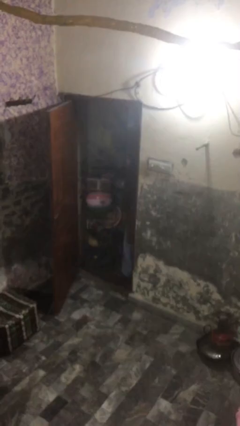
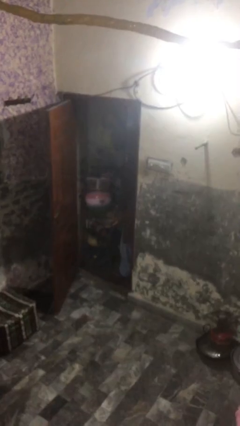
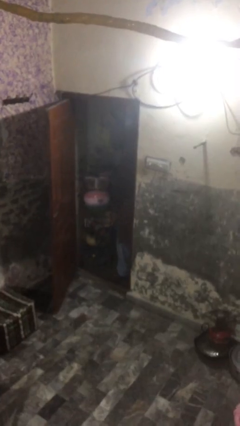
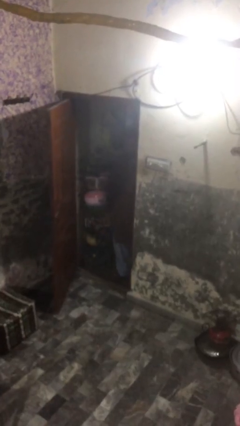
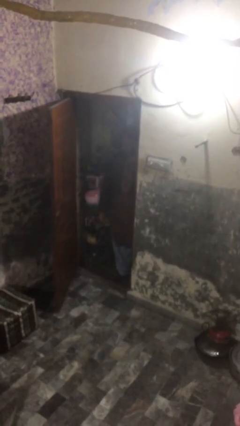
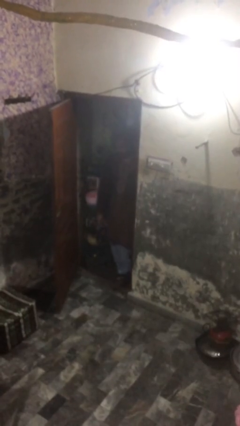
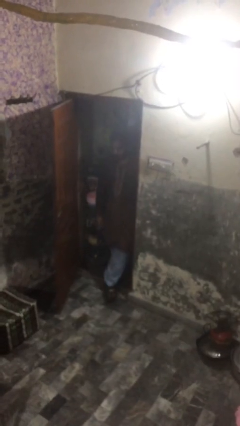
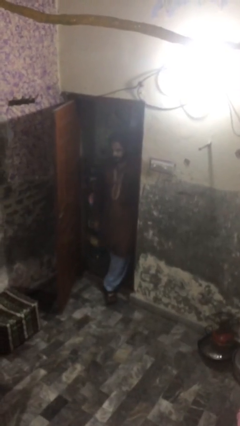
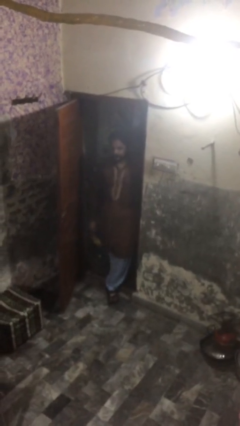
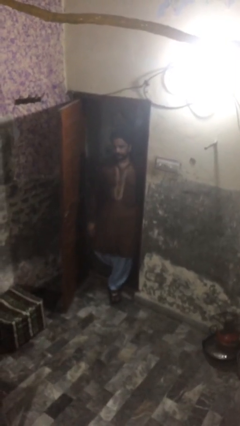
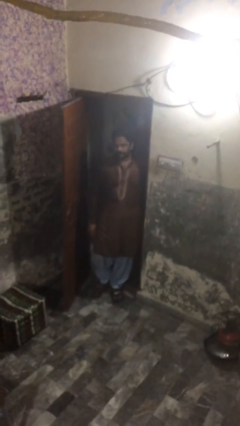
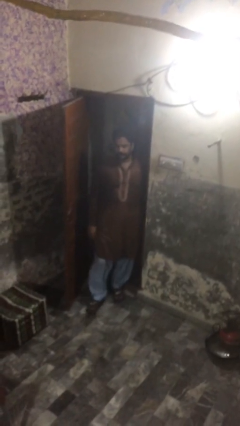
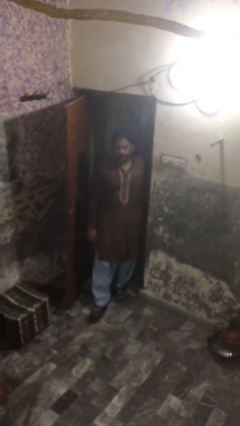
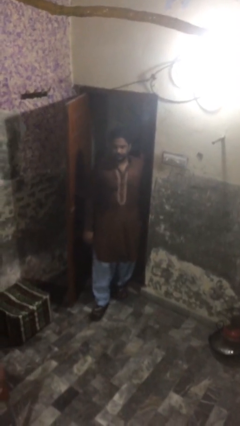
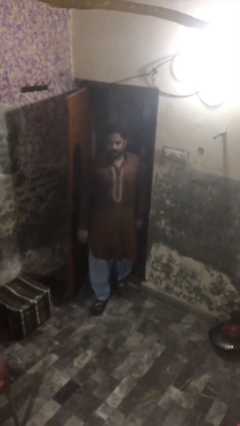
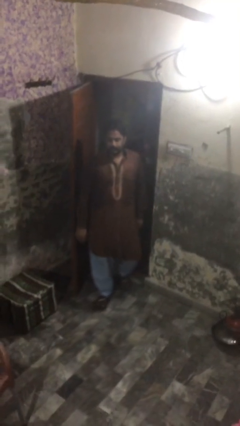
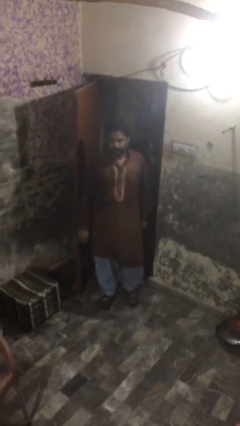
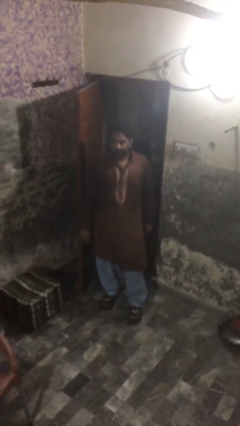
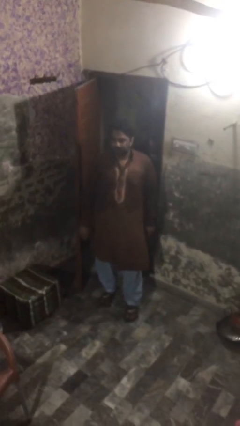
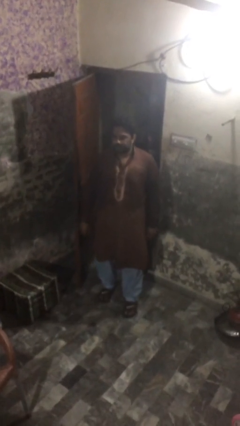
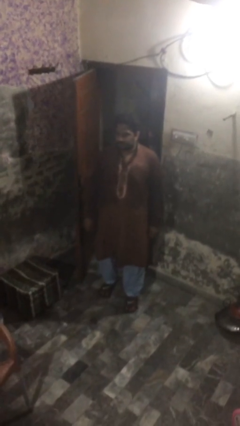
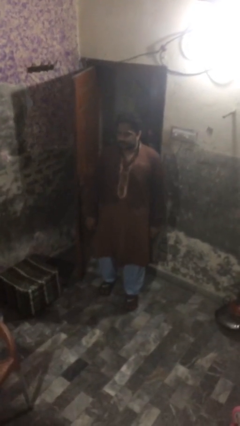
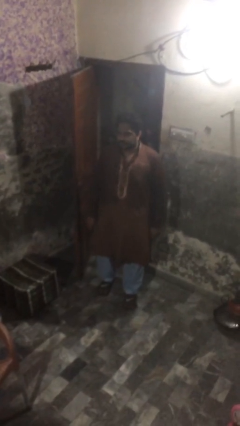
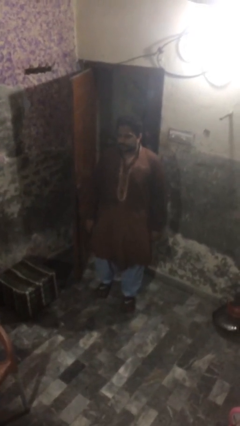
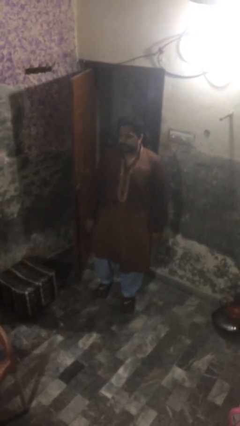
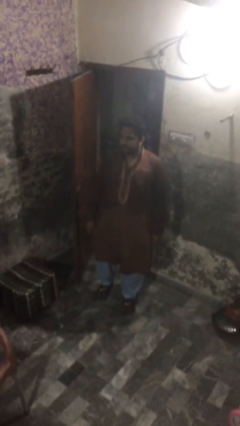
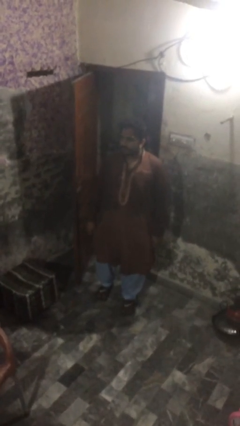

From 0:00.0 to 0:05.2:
person enters scene through structure

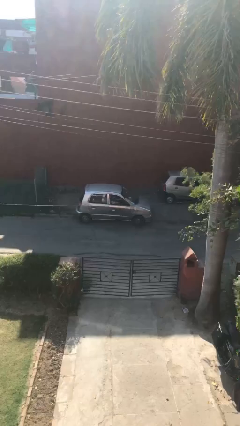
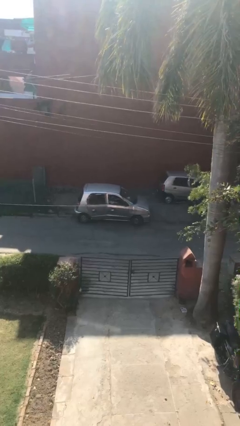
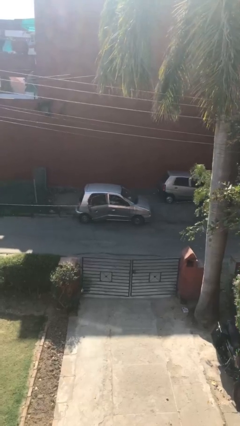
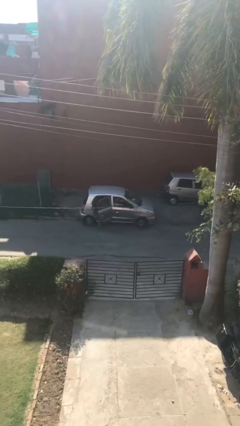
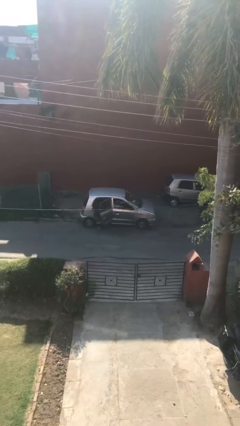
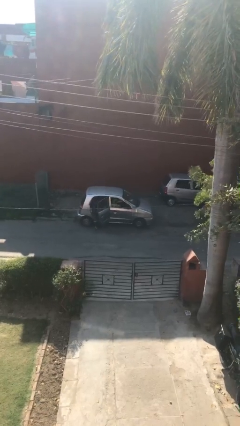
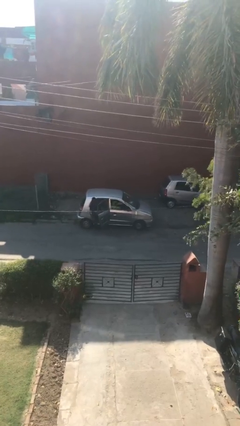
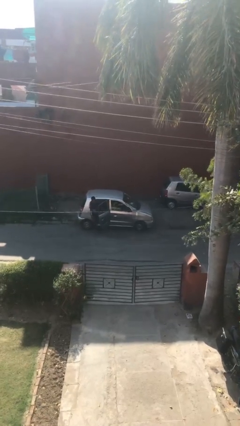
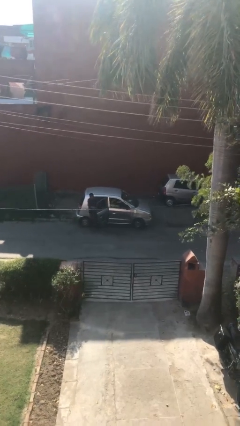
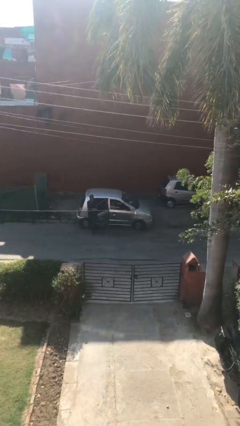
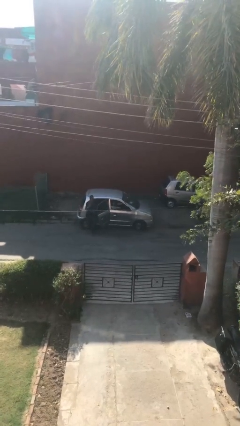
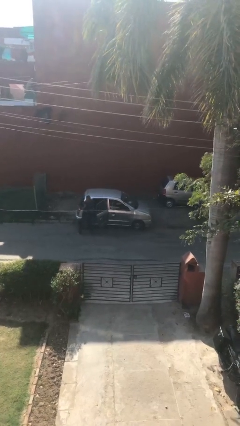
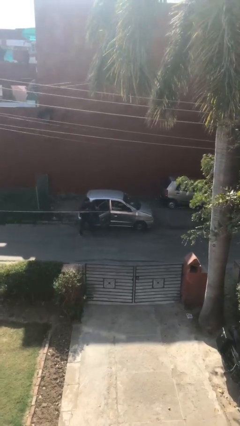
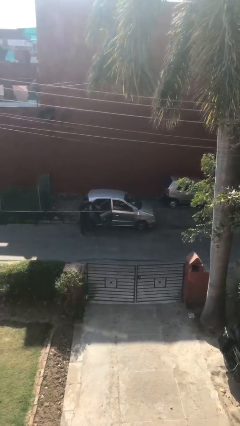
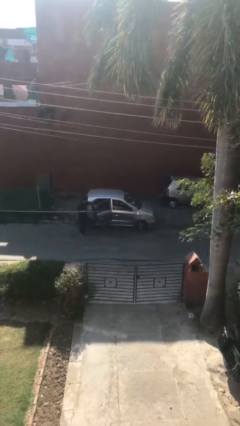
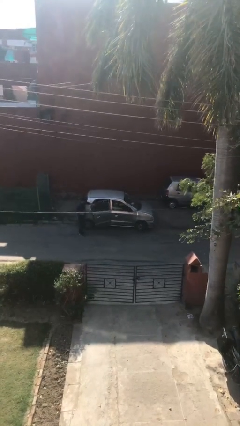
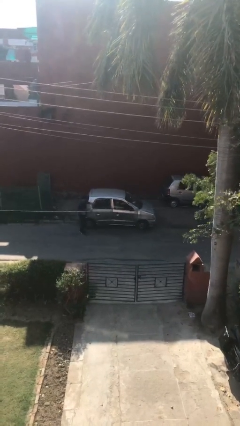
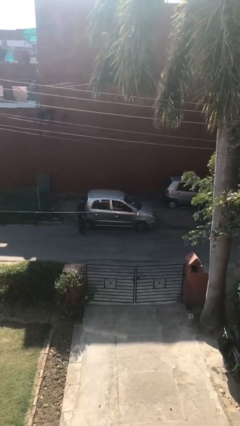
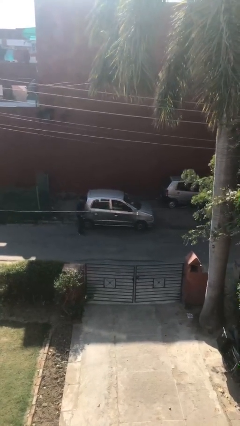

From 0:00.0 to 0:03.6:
car drops off person

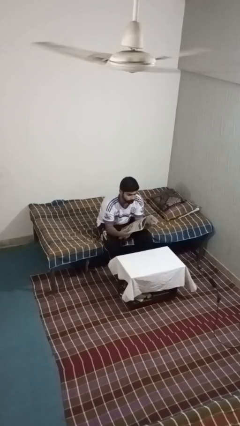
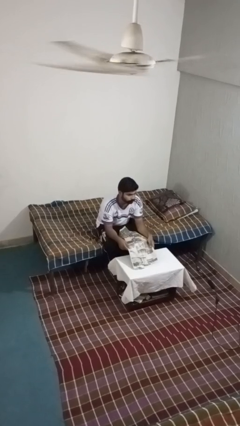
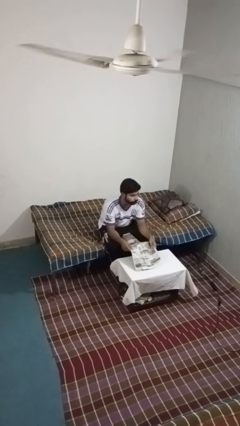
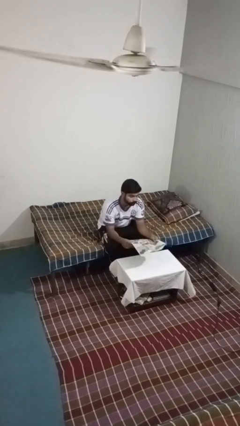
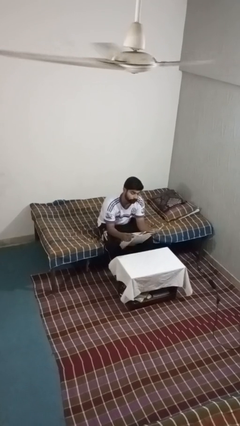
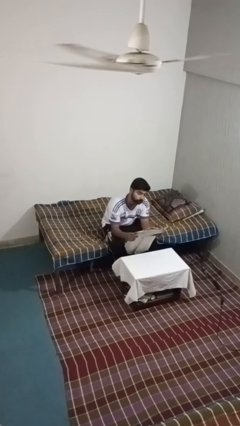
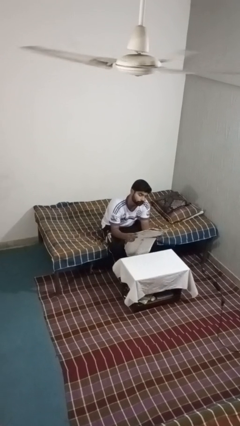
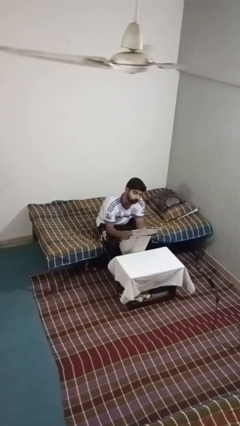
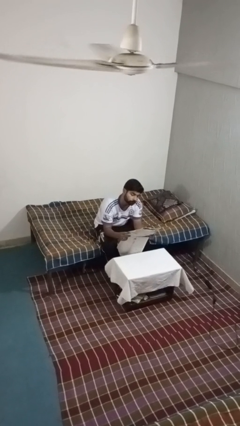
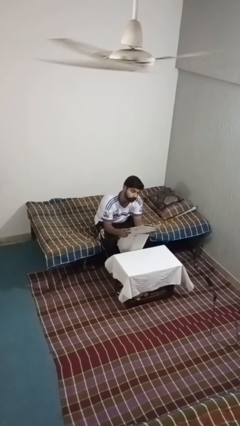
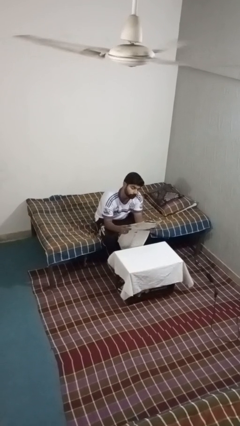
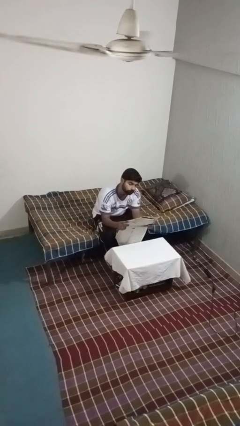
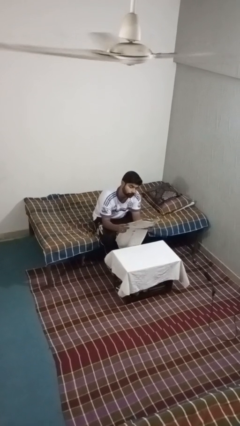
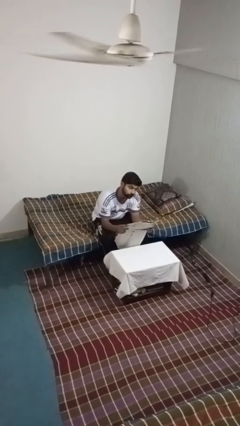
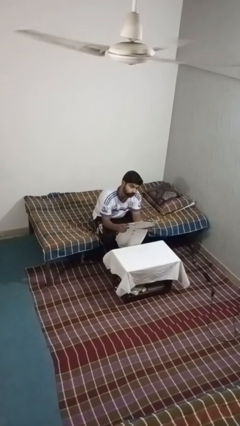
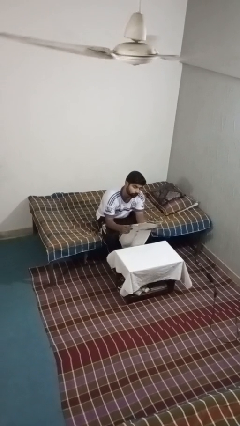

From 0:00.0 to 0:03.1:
person reads newspaper

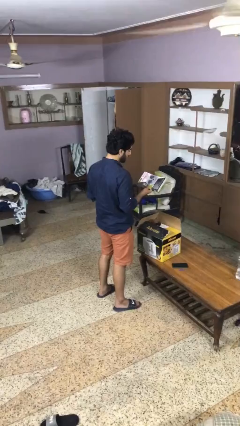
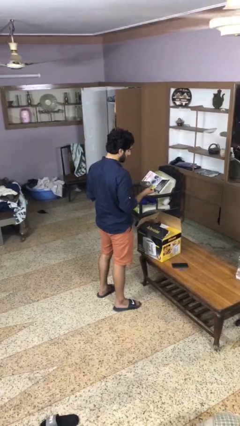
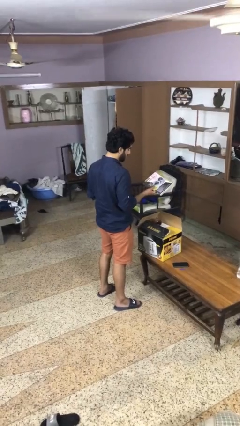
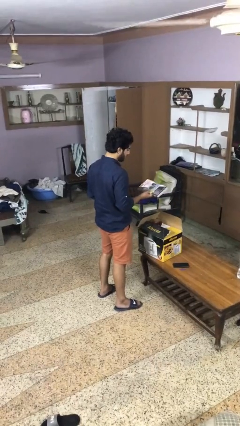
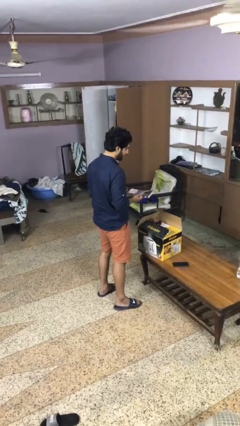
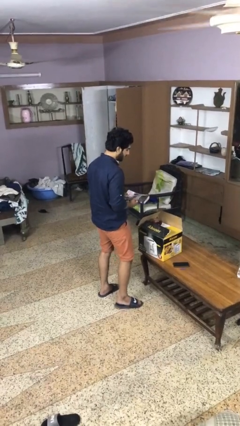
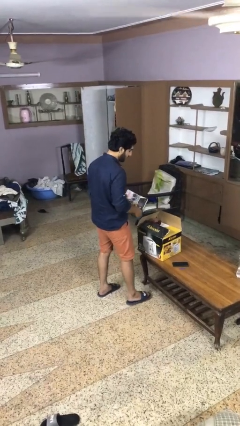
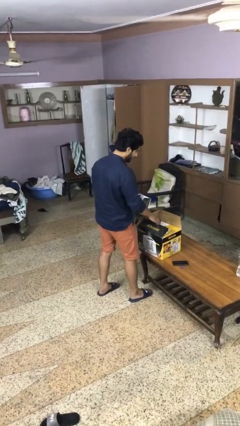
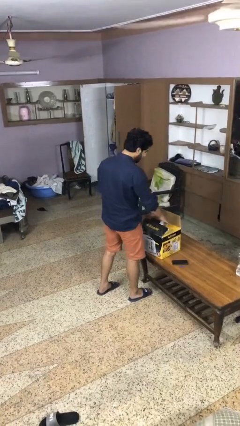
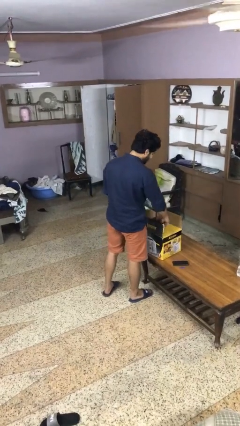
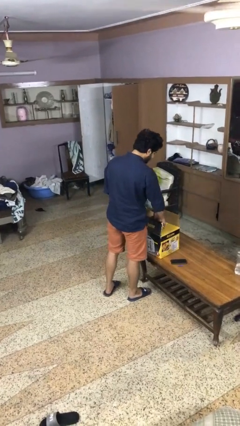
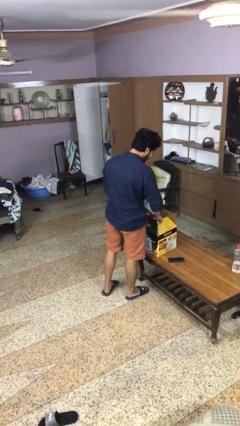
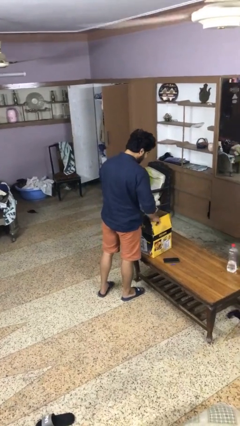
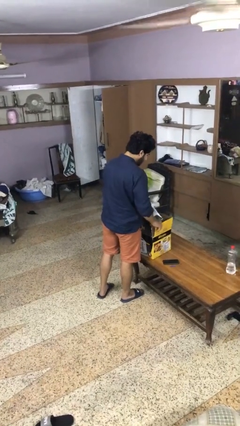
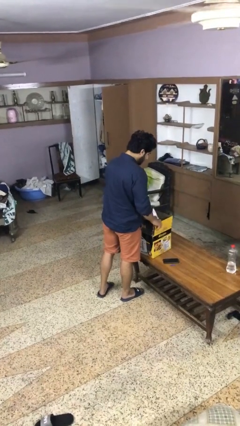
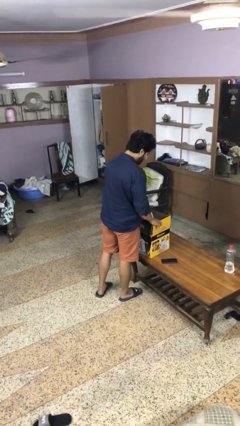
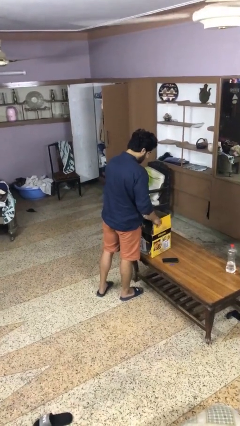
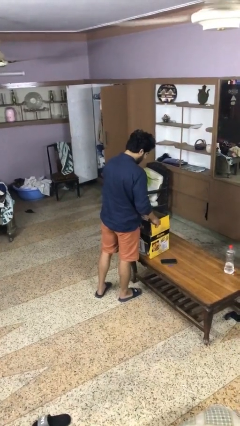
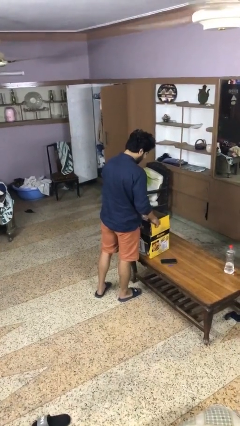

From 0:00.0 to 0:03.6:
person puts object into box

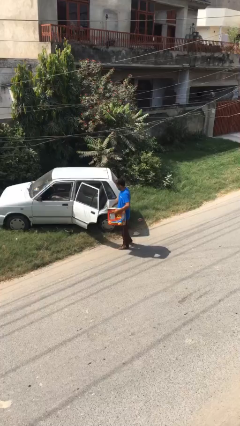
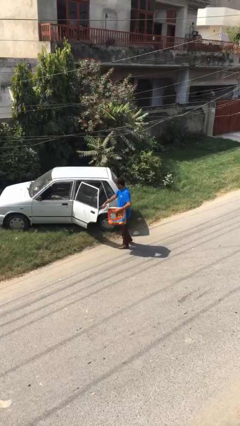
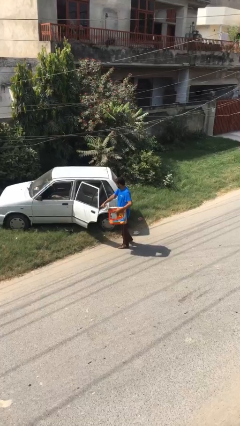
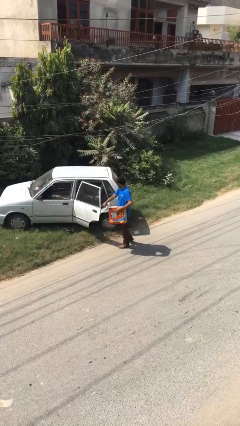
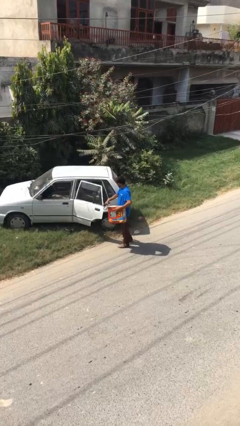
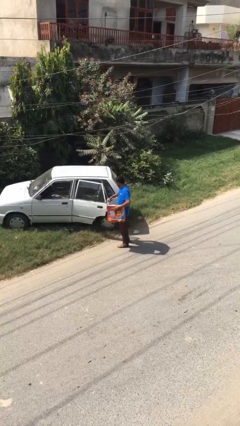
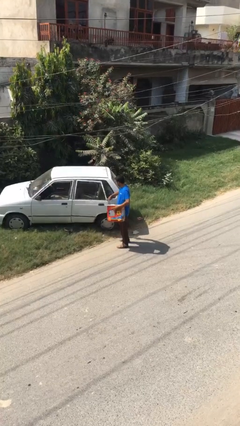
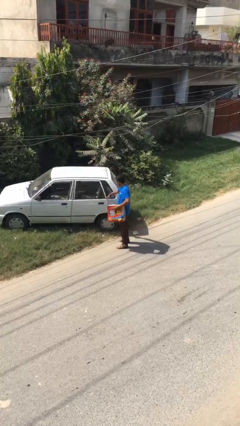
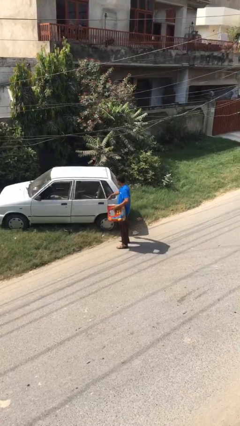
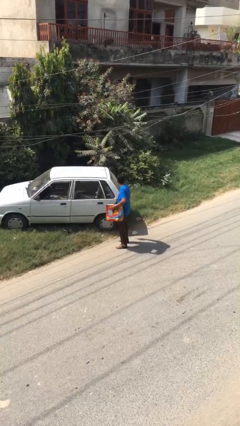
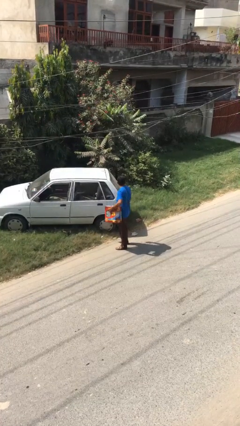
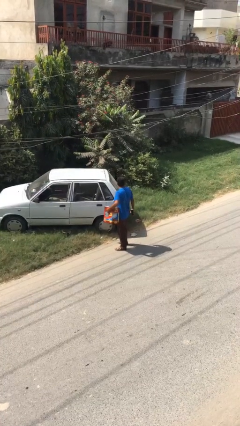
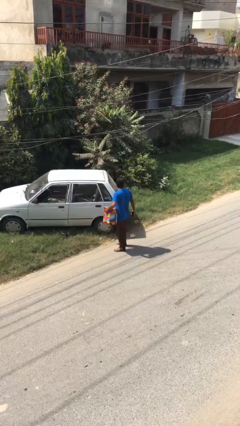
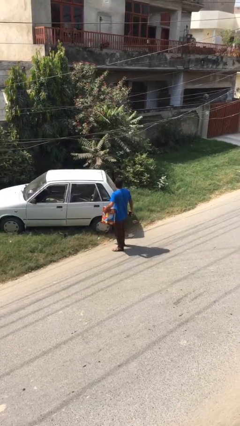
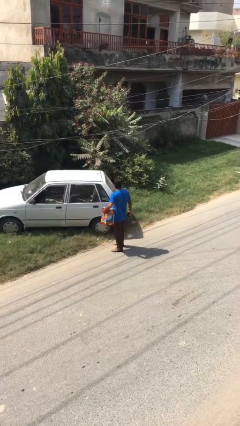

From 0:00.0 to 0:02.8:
person closes car door
